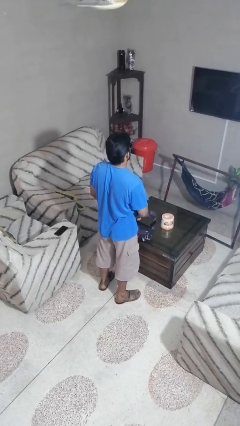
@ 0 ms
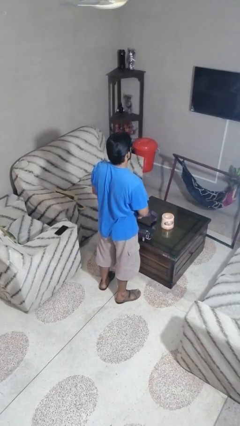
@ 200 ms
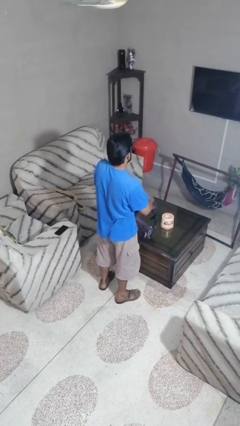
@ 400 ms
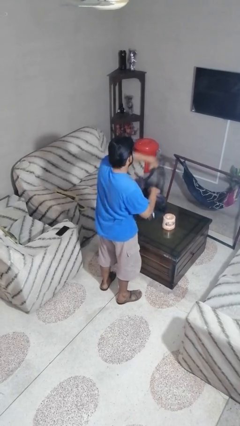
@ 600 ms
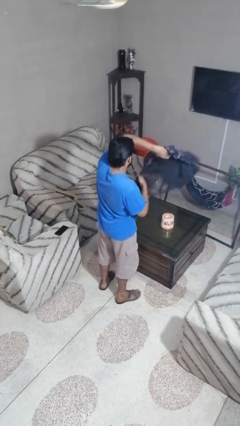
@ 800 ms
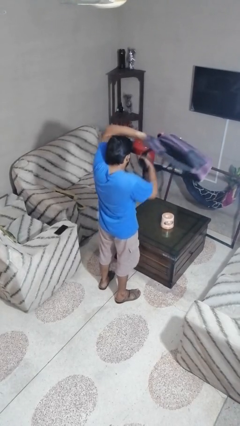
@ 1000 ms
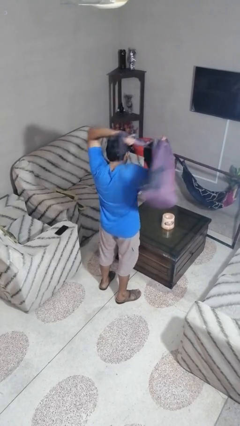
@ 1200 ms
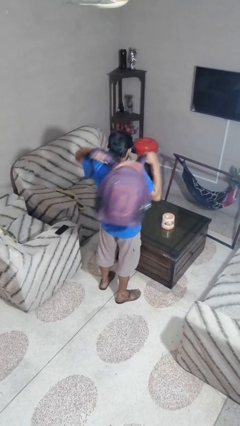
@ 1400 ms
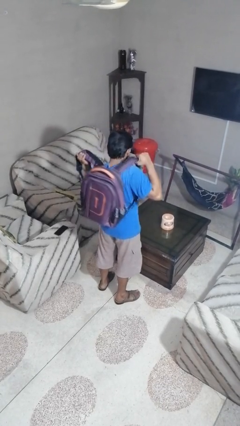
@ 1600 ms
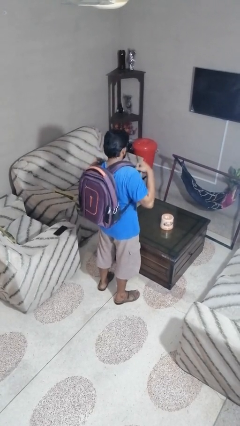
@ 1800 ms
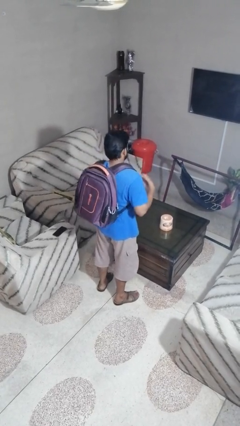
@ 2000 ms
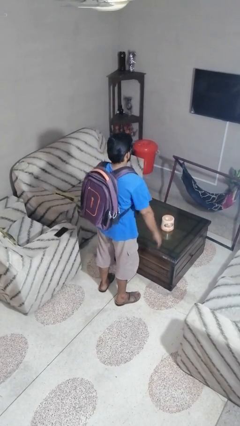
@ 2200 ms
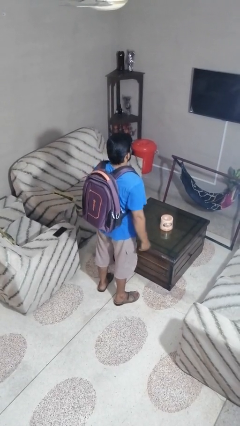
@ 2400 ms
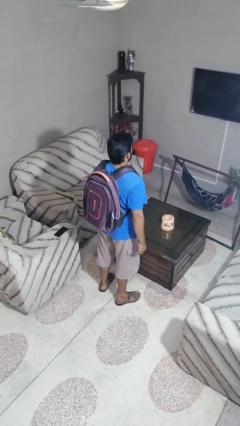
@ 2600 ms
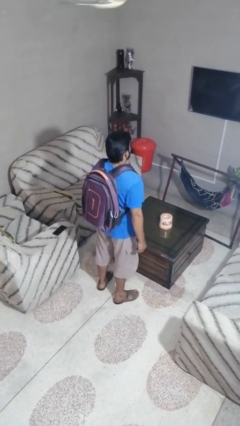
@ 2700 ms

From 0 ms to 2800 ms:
person puts on backpack

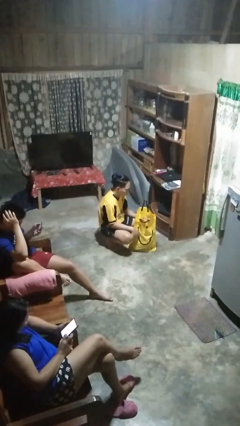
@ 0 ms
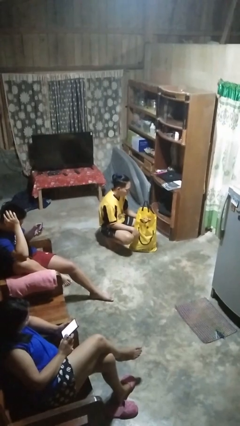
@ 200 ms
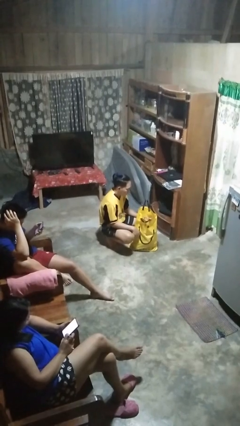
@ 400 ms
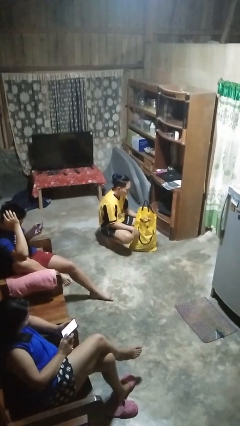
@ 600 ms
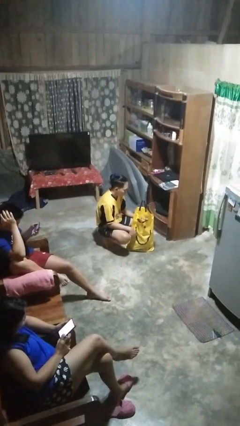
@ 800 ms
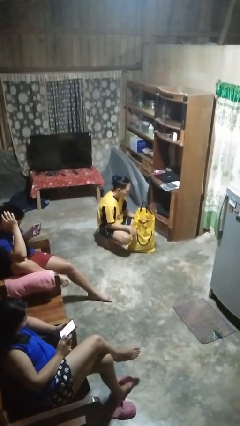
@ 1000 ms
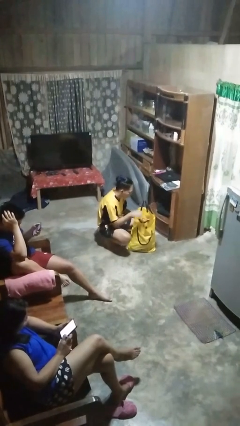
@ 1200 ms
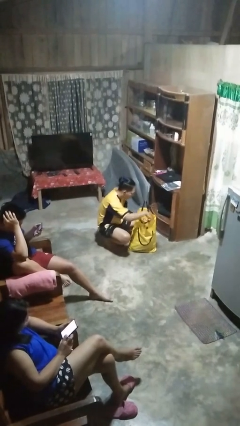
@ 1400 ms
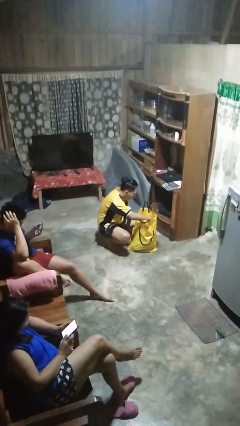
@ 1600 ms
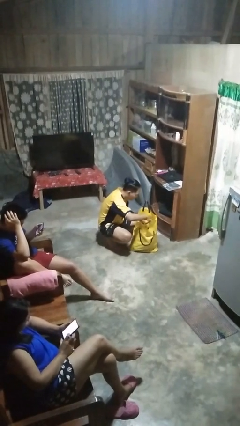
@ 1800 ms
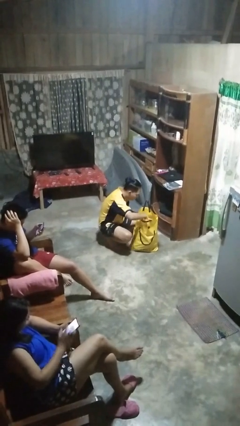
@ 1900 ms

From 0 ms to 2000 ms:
person searches in bag

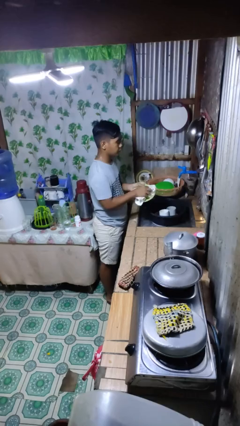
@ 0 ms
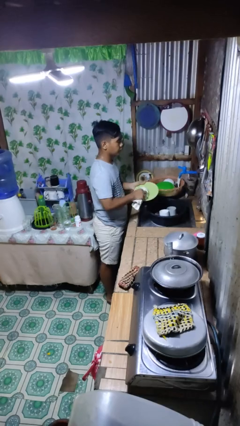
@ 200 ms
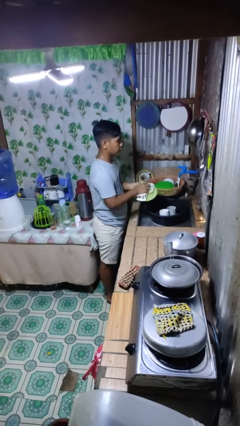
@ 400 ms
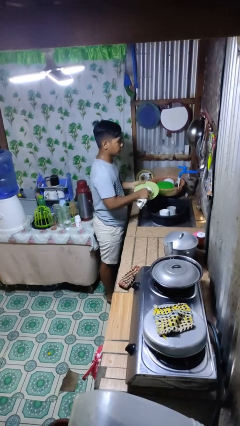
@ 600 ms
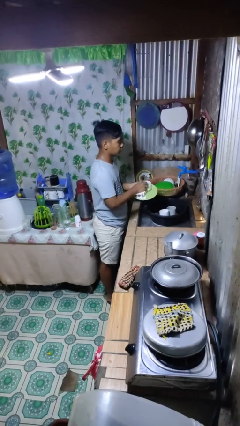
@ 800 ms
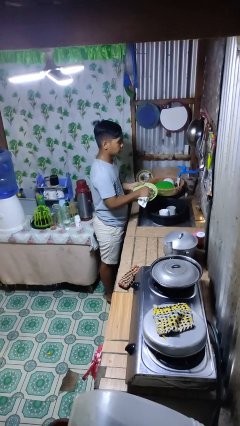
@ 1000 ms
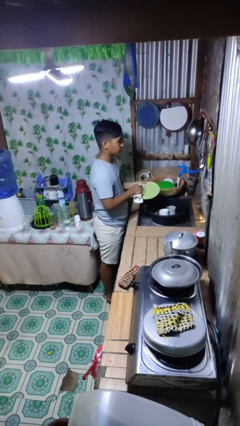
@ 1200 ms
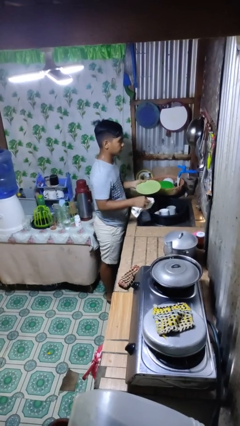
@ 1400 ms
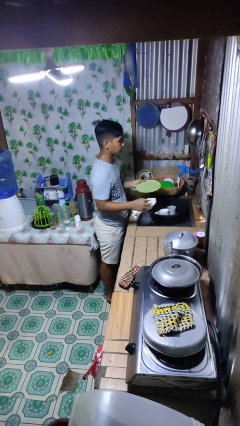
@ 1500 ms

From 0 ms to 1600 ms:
person dries dish

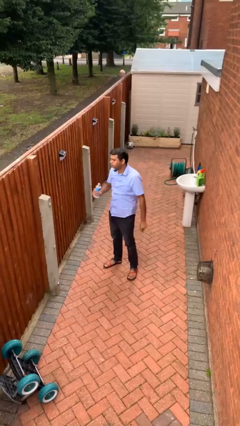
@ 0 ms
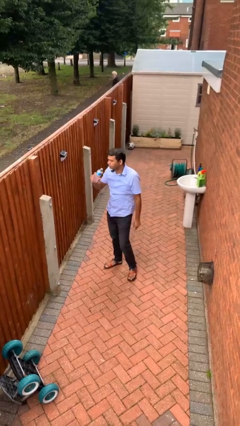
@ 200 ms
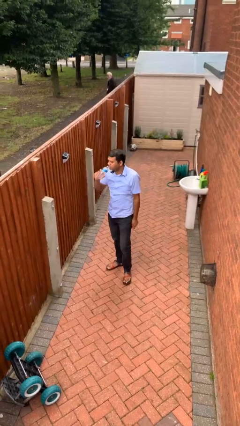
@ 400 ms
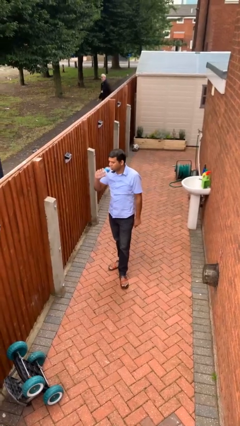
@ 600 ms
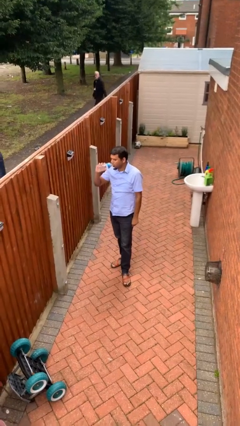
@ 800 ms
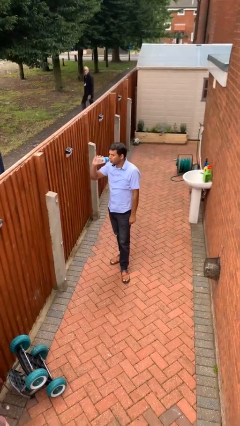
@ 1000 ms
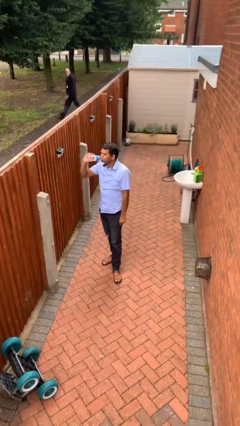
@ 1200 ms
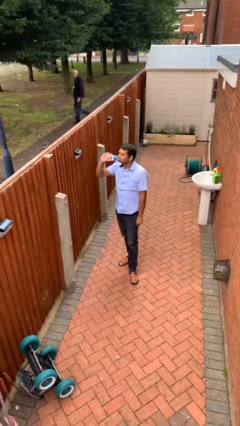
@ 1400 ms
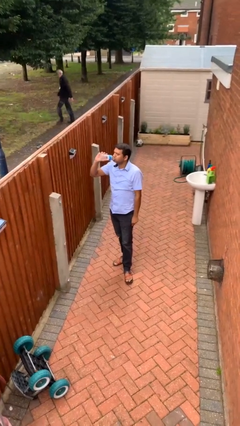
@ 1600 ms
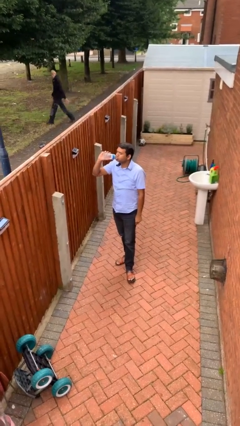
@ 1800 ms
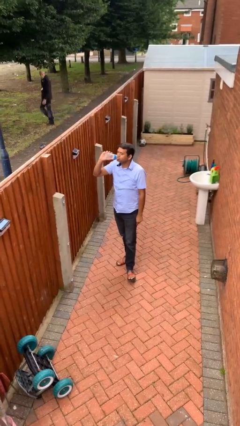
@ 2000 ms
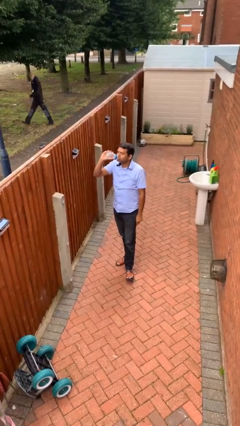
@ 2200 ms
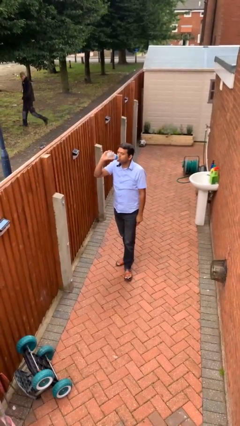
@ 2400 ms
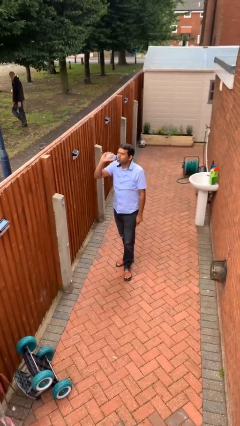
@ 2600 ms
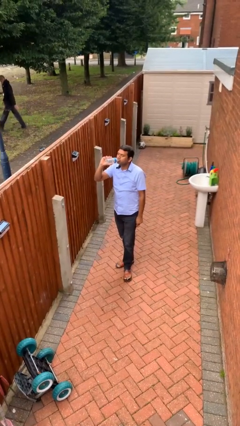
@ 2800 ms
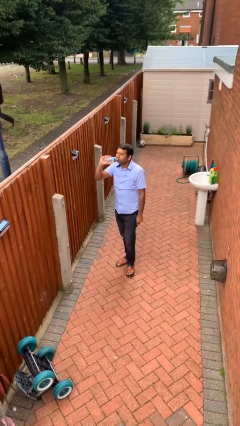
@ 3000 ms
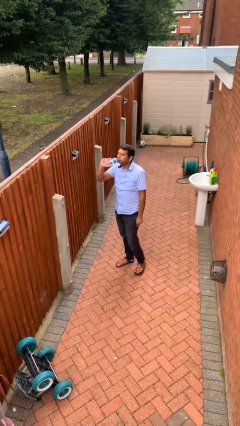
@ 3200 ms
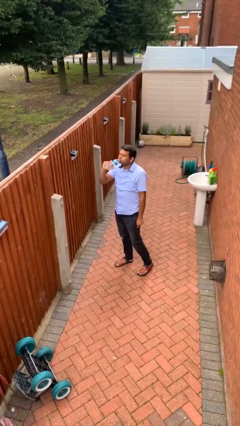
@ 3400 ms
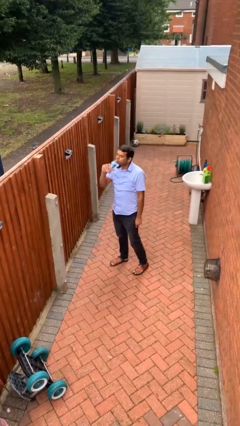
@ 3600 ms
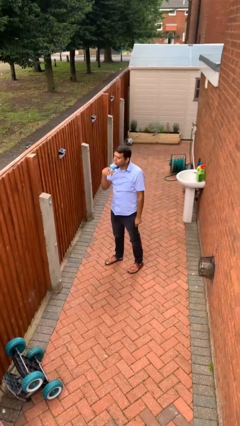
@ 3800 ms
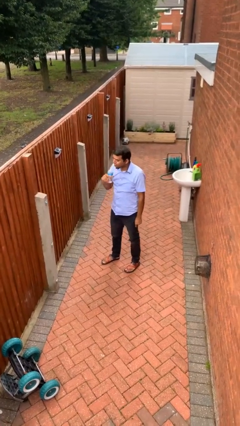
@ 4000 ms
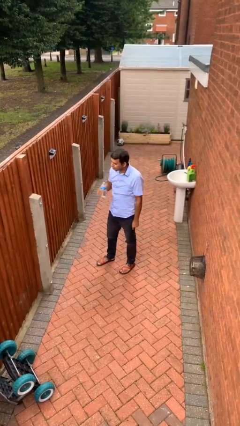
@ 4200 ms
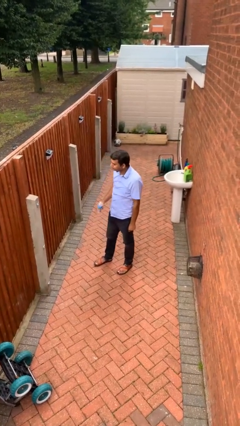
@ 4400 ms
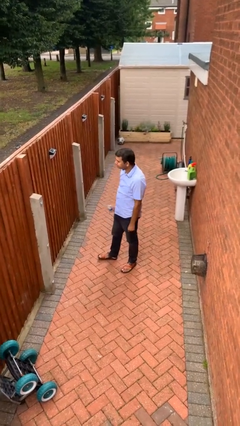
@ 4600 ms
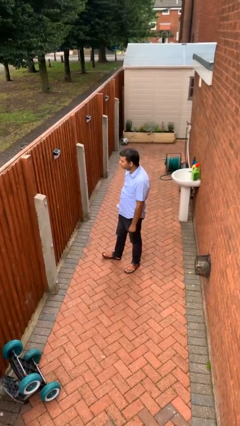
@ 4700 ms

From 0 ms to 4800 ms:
person drinks from bottle

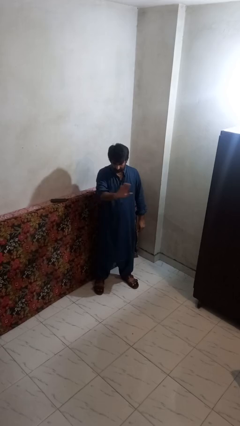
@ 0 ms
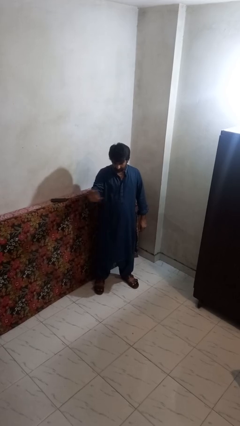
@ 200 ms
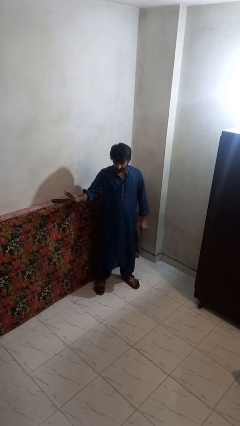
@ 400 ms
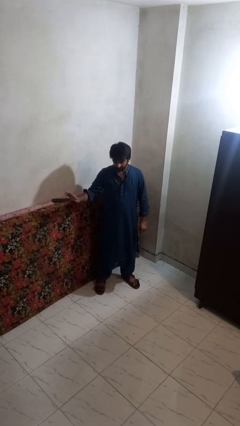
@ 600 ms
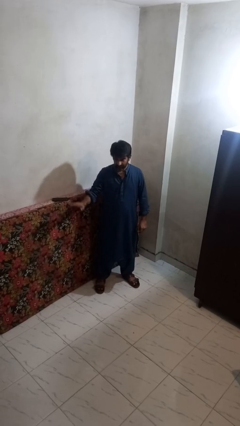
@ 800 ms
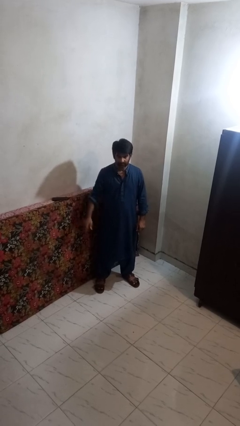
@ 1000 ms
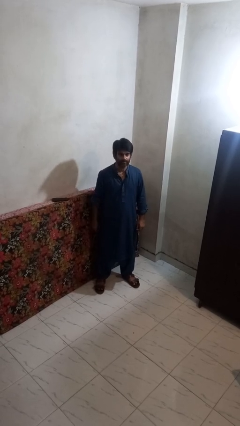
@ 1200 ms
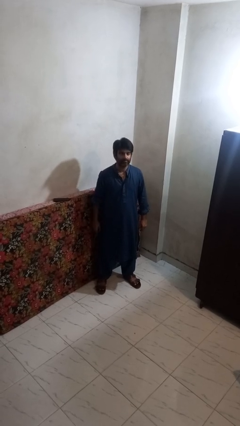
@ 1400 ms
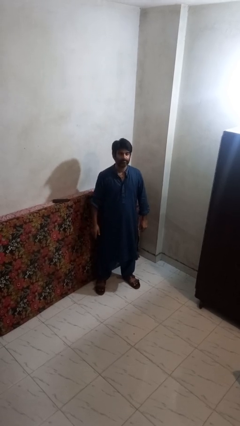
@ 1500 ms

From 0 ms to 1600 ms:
person gestures swipe right

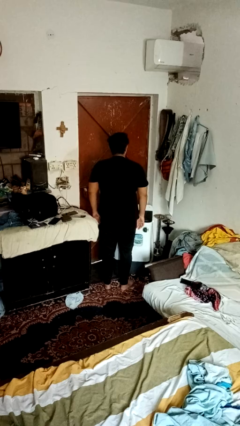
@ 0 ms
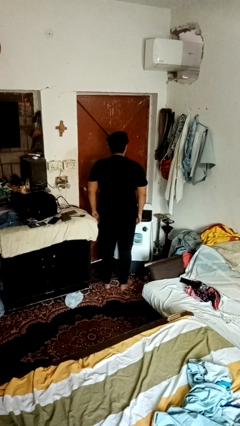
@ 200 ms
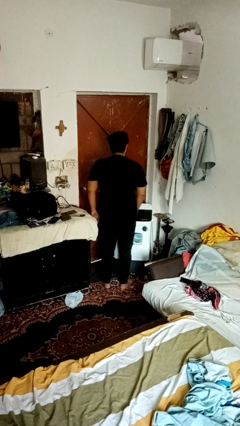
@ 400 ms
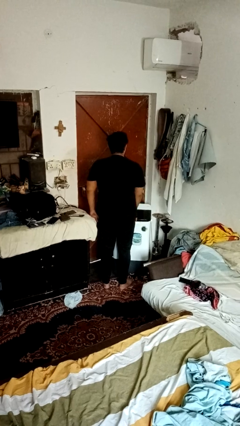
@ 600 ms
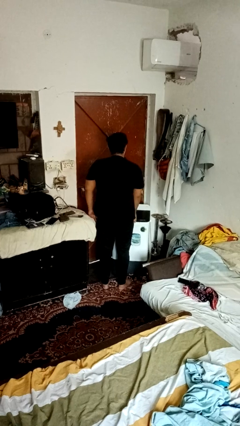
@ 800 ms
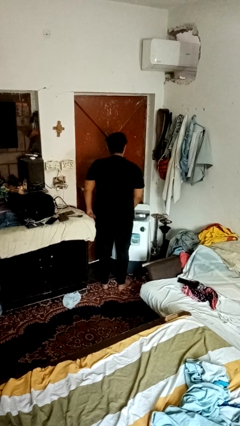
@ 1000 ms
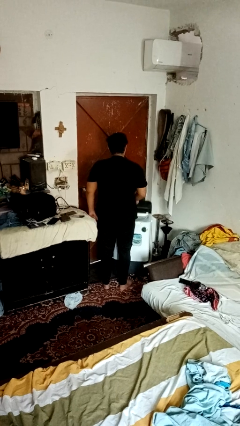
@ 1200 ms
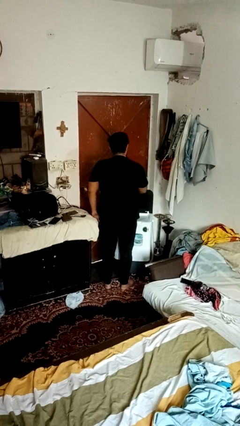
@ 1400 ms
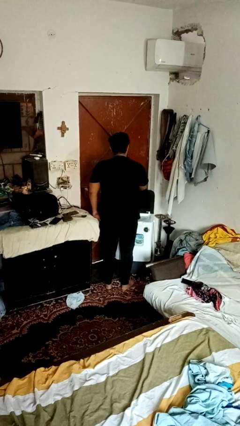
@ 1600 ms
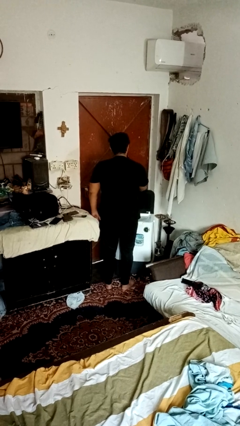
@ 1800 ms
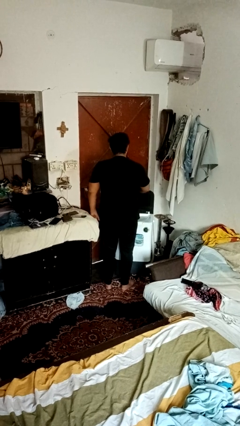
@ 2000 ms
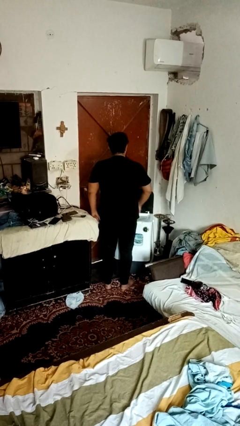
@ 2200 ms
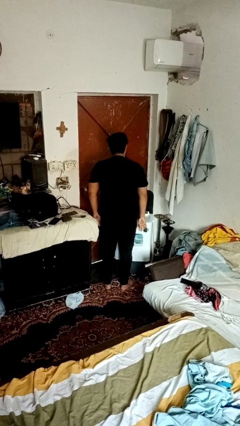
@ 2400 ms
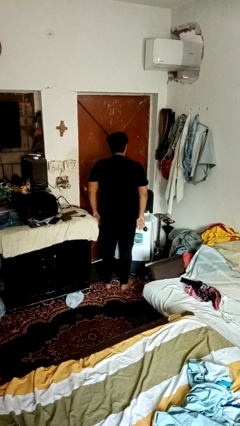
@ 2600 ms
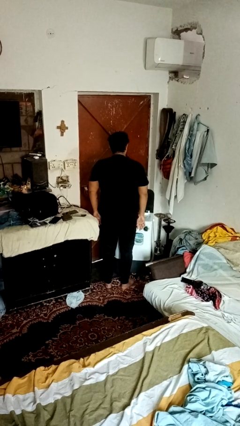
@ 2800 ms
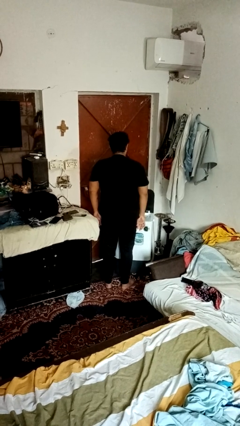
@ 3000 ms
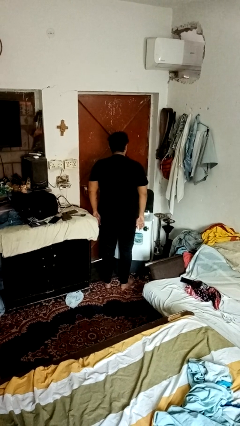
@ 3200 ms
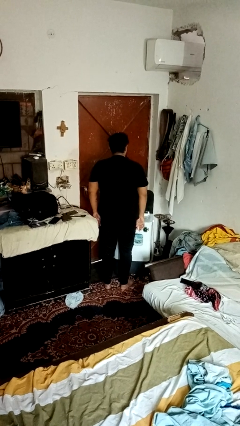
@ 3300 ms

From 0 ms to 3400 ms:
person opens clothes washer

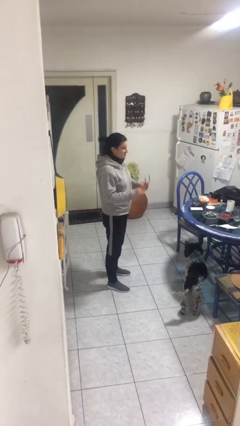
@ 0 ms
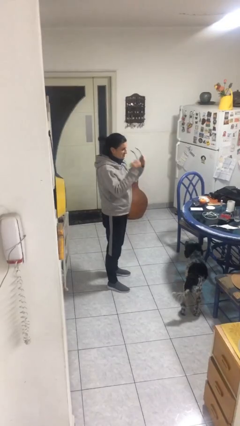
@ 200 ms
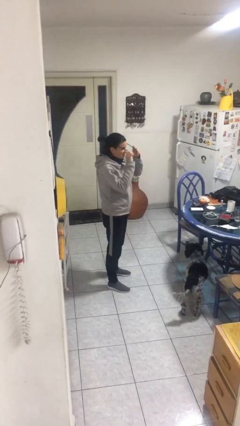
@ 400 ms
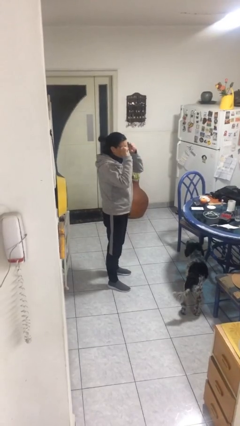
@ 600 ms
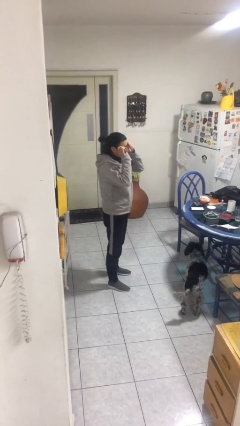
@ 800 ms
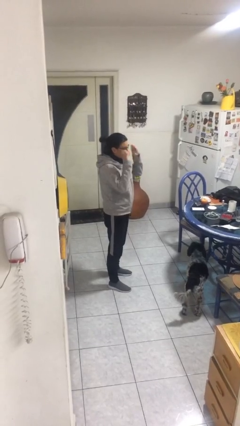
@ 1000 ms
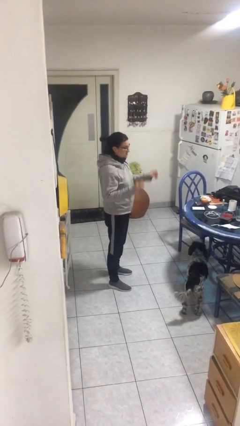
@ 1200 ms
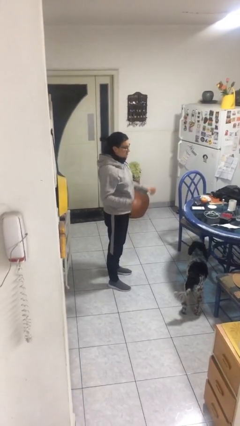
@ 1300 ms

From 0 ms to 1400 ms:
person puts on glasses
